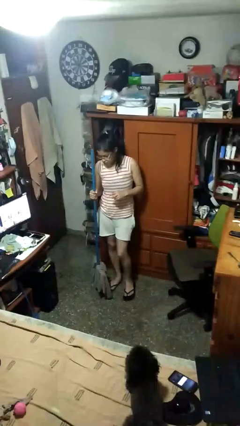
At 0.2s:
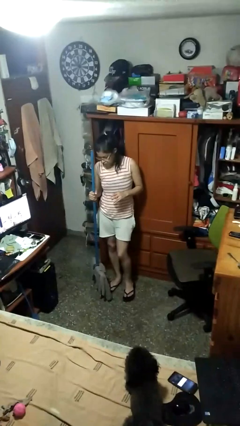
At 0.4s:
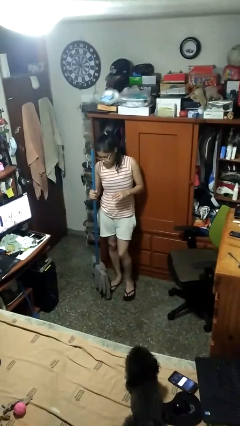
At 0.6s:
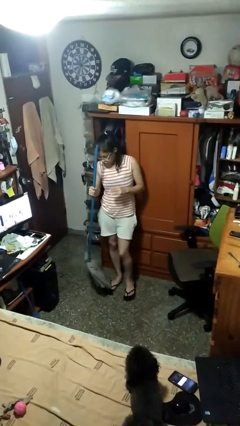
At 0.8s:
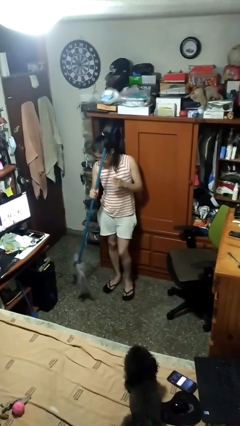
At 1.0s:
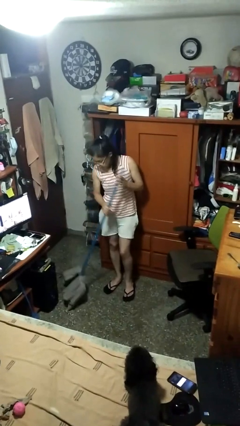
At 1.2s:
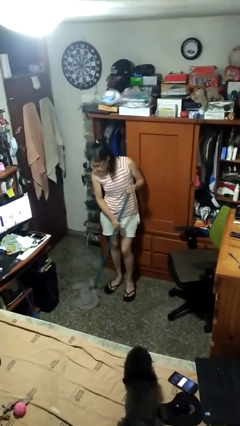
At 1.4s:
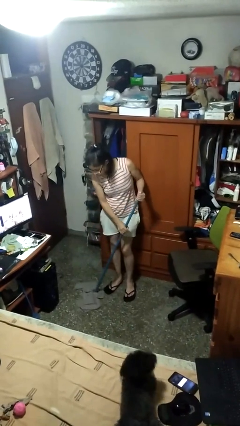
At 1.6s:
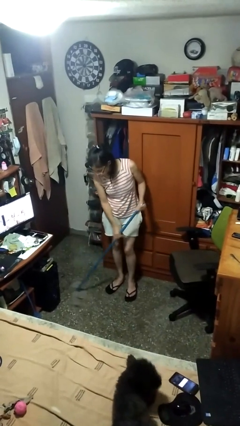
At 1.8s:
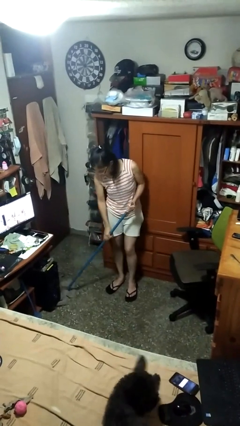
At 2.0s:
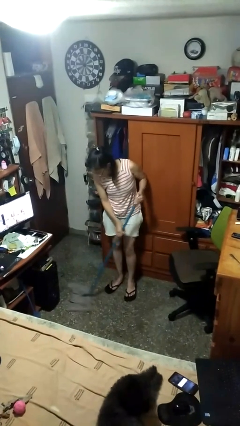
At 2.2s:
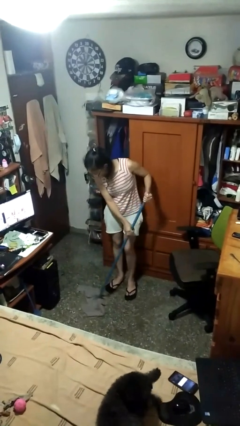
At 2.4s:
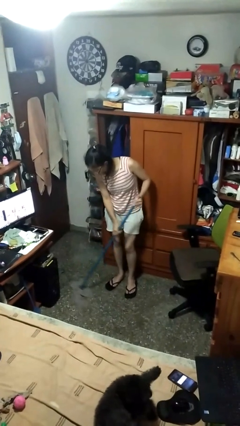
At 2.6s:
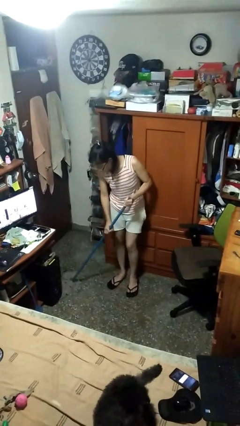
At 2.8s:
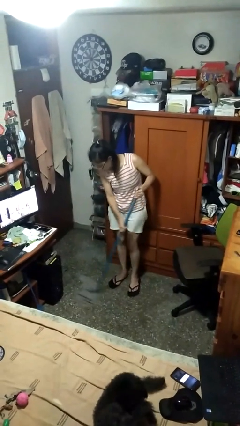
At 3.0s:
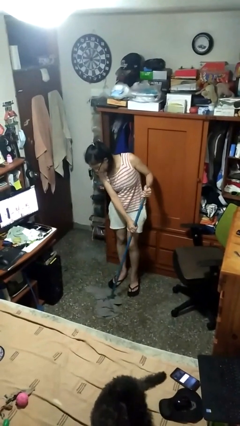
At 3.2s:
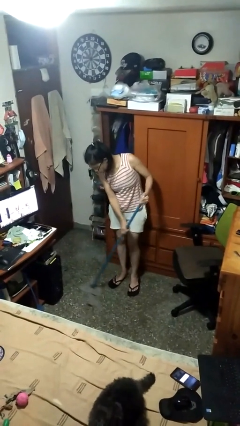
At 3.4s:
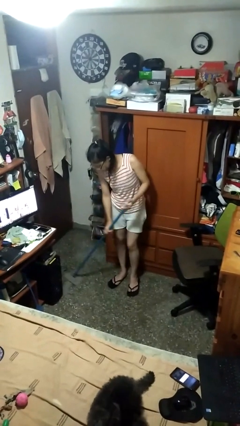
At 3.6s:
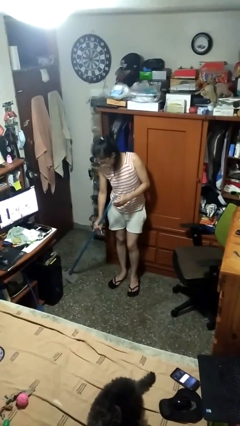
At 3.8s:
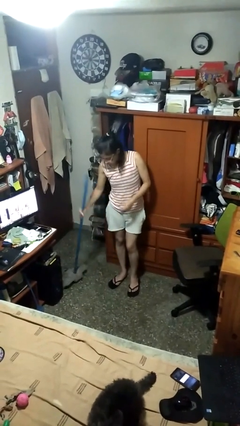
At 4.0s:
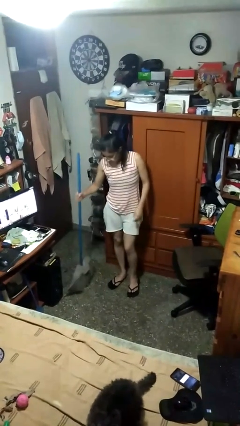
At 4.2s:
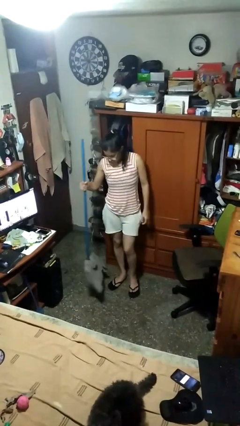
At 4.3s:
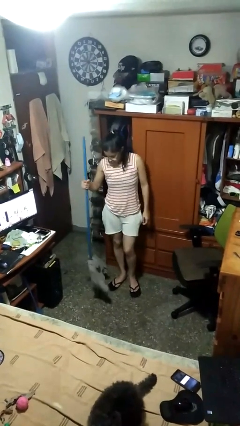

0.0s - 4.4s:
person mops

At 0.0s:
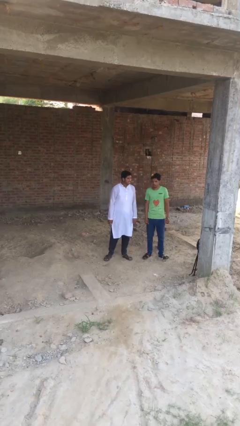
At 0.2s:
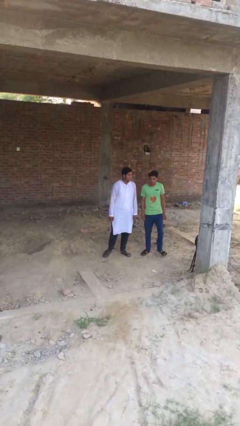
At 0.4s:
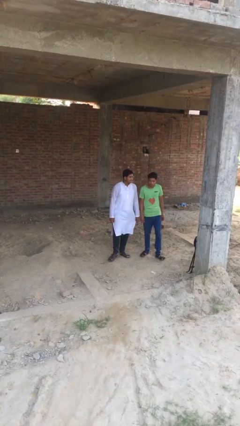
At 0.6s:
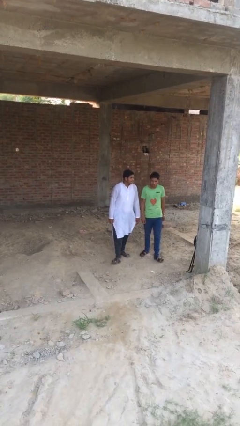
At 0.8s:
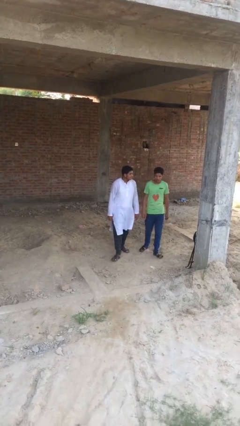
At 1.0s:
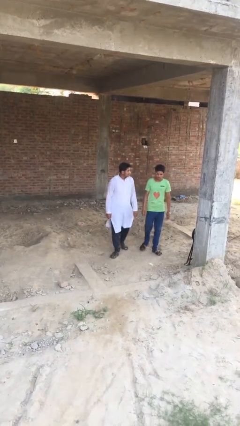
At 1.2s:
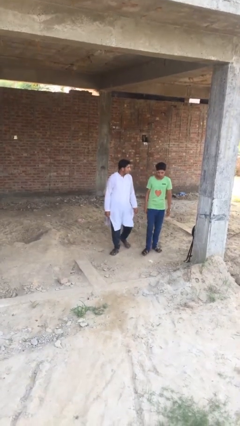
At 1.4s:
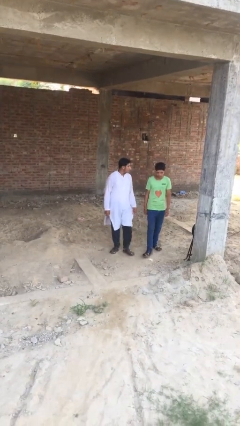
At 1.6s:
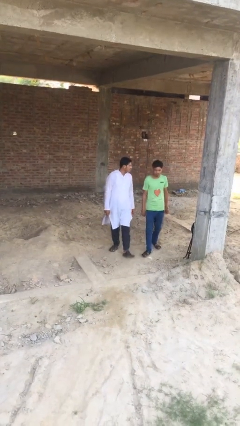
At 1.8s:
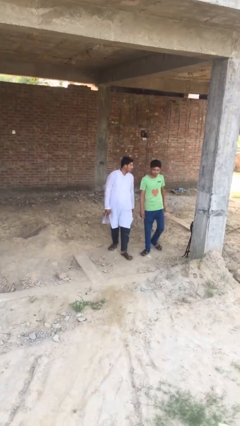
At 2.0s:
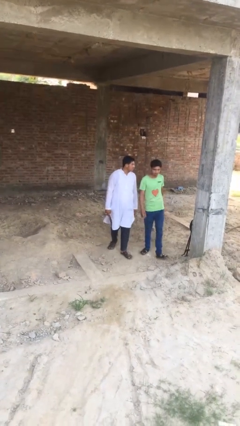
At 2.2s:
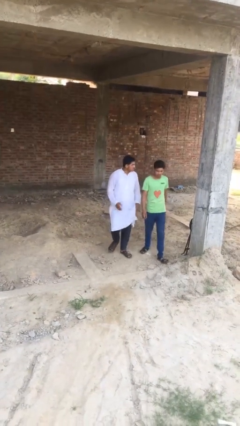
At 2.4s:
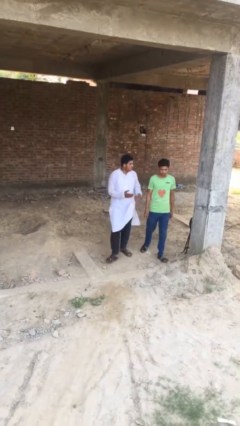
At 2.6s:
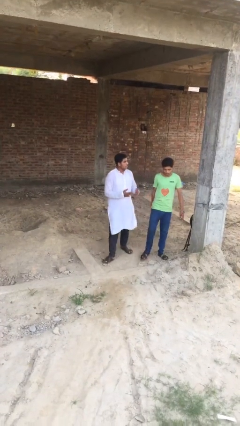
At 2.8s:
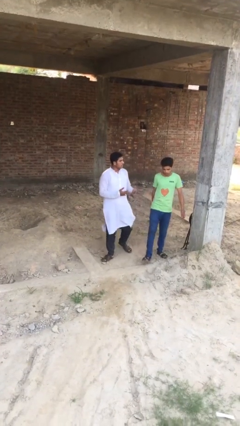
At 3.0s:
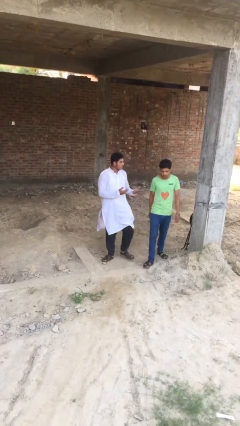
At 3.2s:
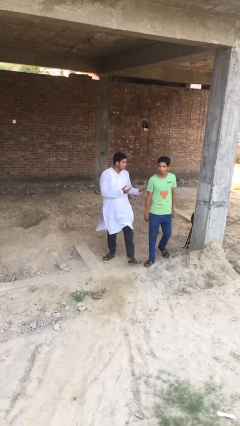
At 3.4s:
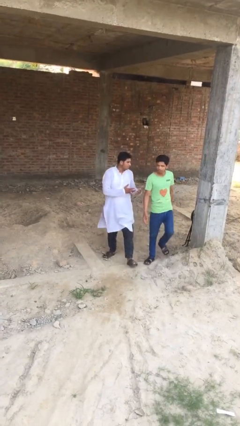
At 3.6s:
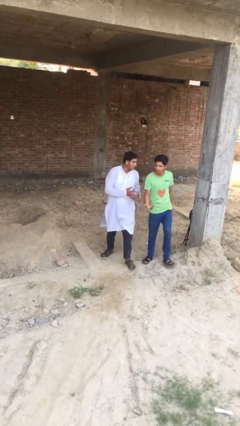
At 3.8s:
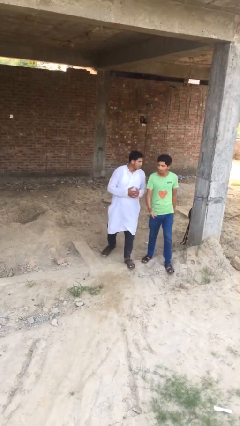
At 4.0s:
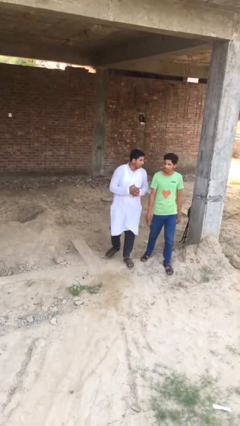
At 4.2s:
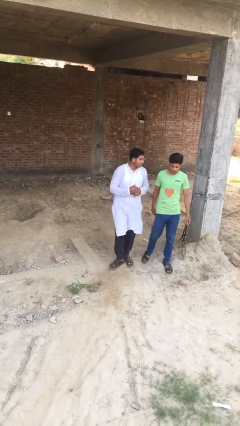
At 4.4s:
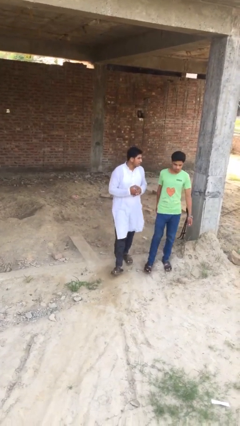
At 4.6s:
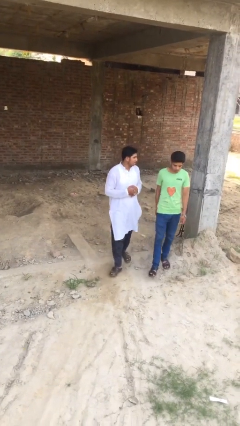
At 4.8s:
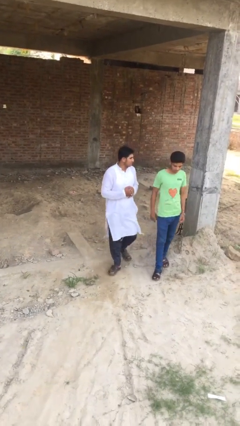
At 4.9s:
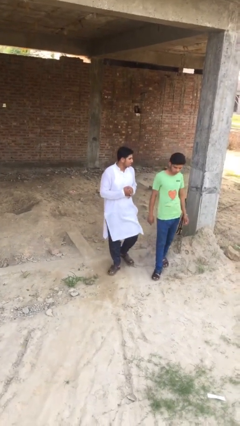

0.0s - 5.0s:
person talks to person

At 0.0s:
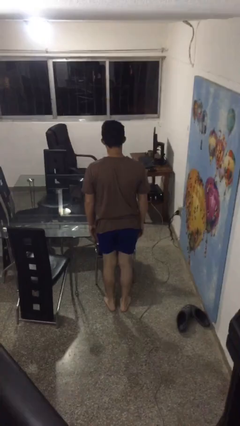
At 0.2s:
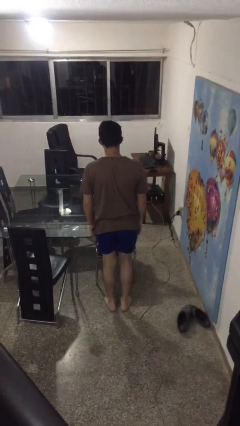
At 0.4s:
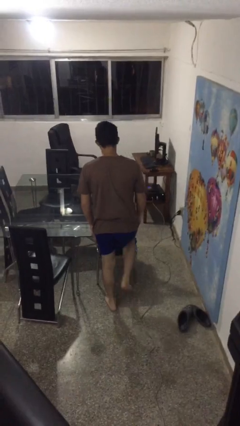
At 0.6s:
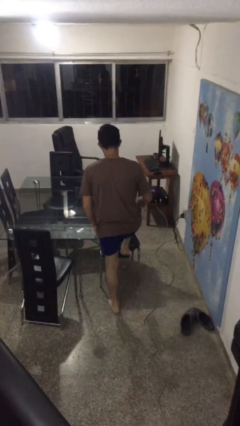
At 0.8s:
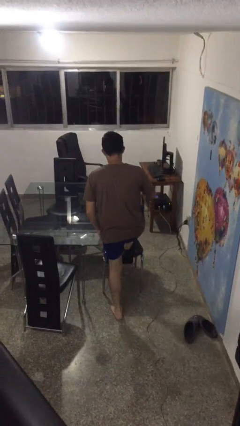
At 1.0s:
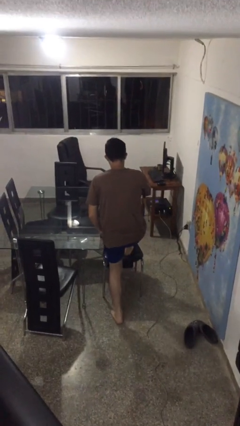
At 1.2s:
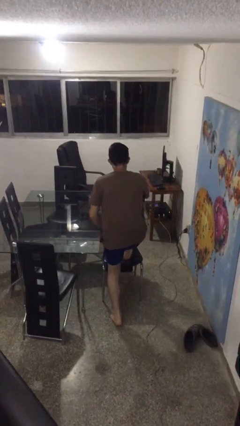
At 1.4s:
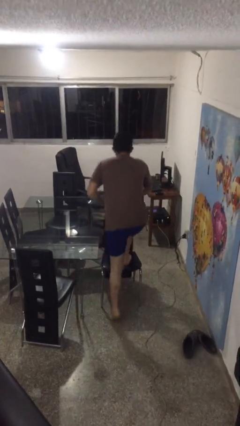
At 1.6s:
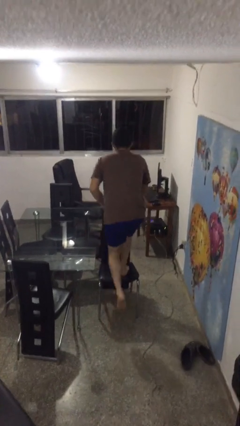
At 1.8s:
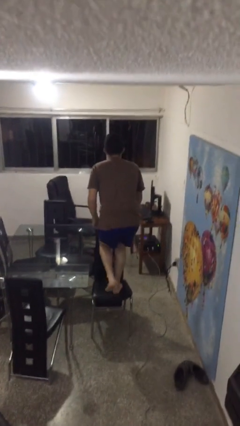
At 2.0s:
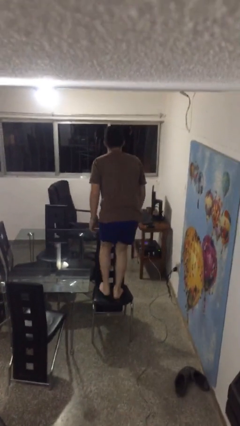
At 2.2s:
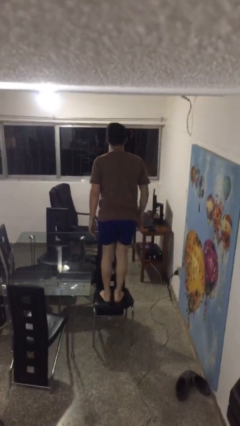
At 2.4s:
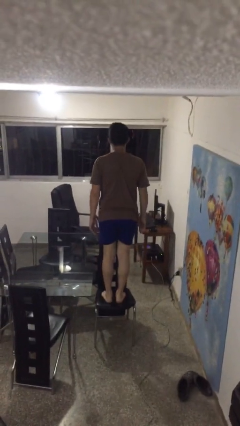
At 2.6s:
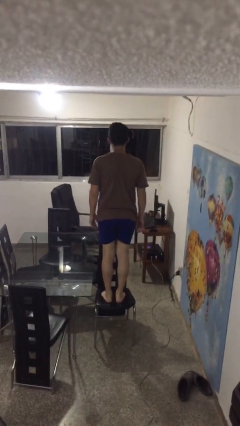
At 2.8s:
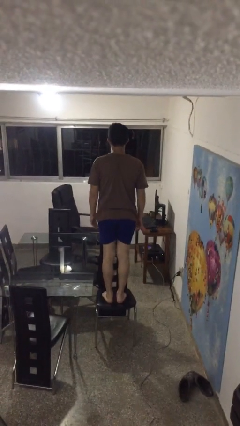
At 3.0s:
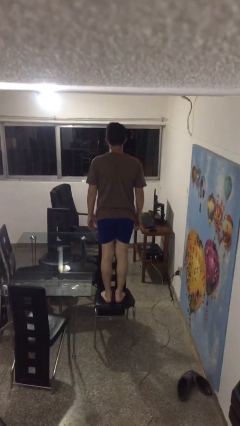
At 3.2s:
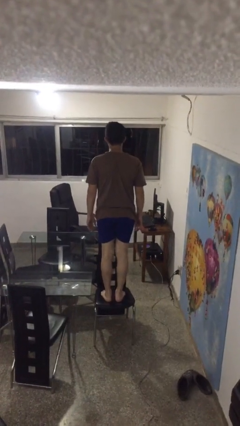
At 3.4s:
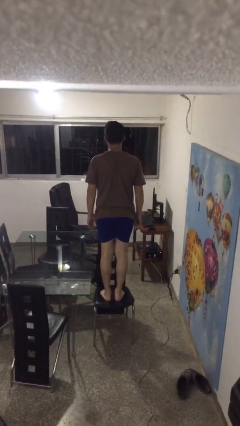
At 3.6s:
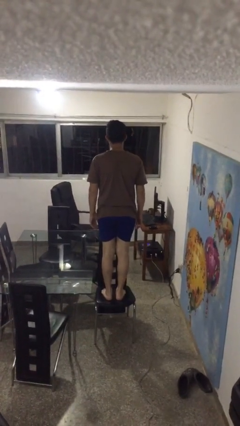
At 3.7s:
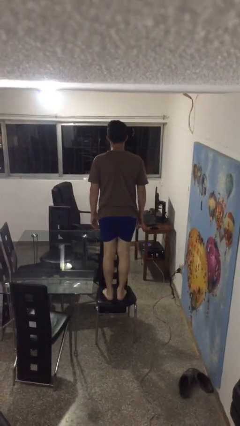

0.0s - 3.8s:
person climbs on chair

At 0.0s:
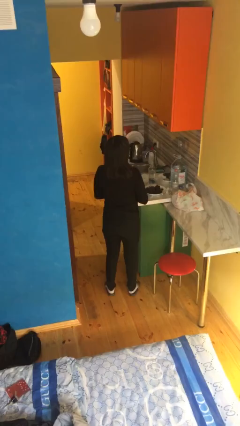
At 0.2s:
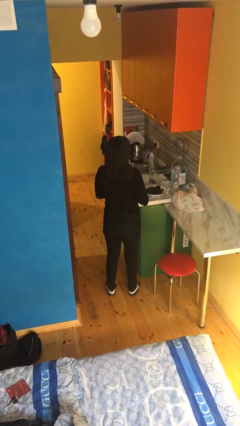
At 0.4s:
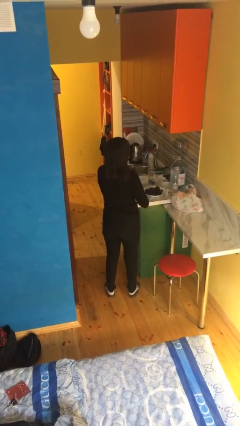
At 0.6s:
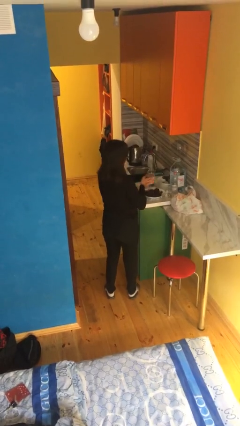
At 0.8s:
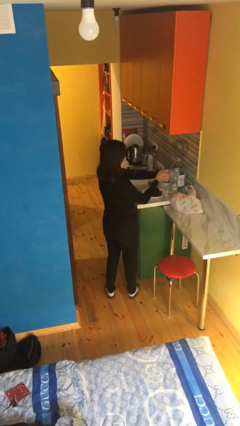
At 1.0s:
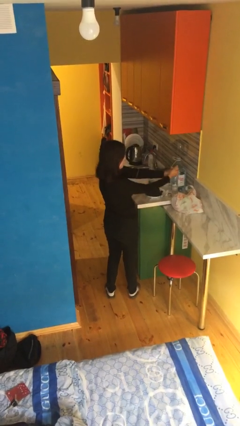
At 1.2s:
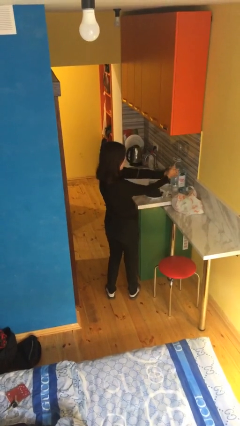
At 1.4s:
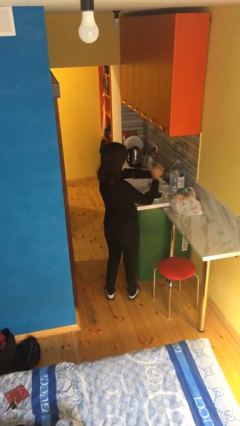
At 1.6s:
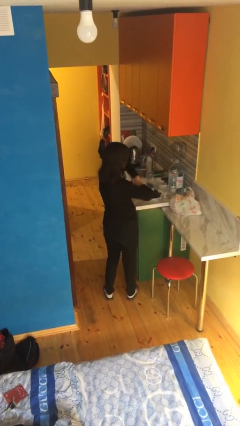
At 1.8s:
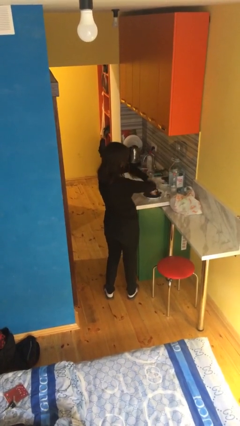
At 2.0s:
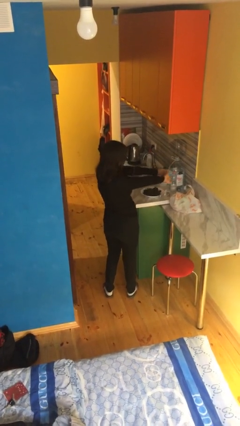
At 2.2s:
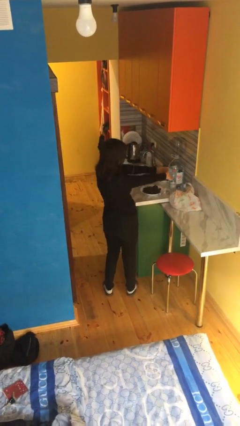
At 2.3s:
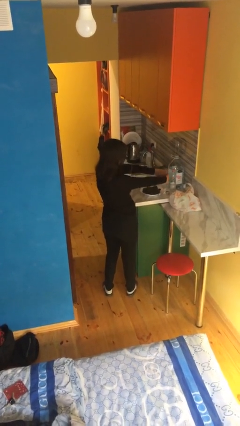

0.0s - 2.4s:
person cracks knuckles

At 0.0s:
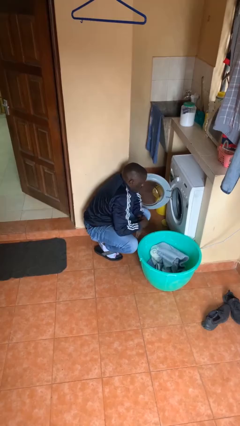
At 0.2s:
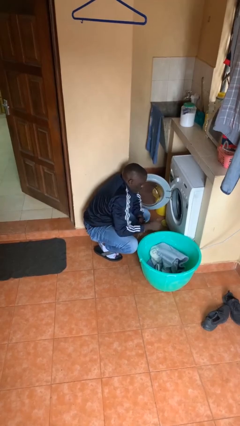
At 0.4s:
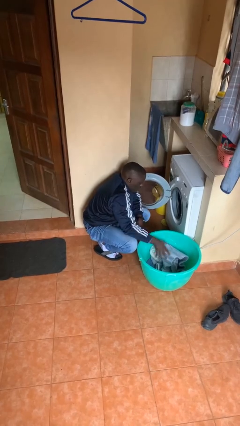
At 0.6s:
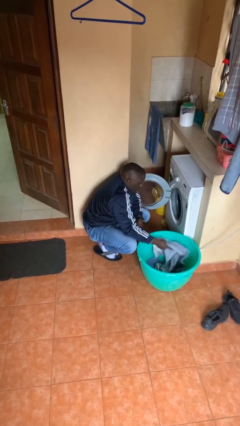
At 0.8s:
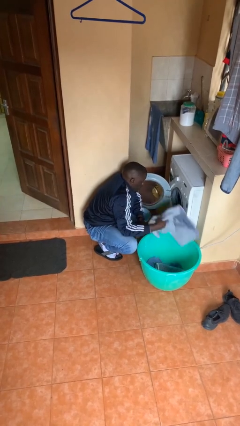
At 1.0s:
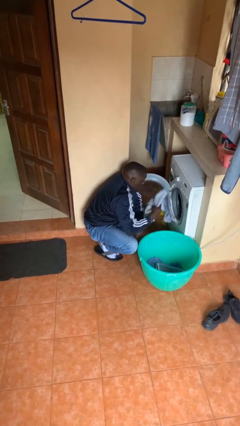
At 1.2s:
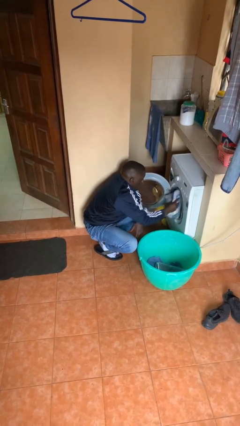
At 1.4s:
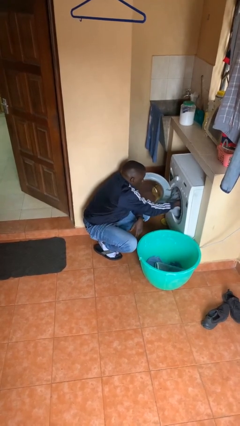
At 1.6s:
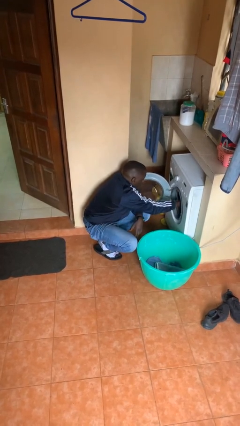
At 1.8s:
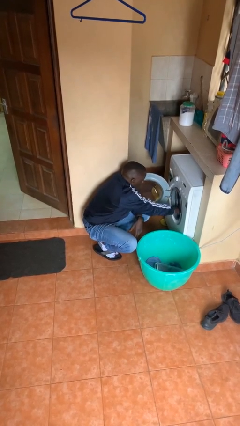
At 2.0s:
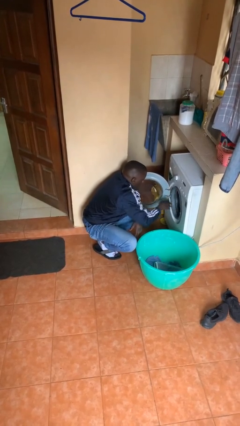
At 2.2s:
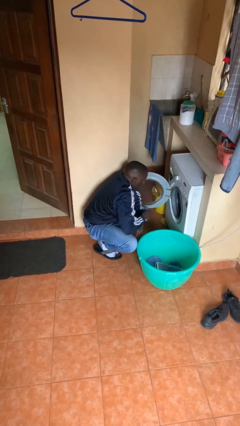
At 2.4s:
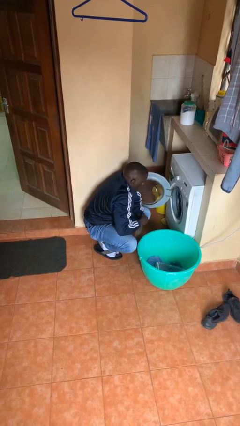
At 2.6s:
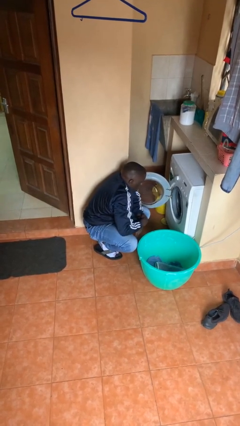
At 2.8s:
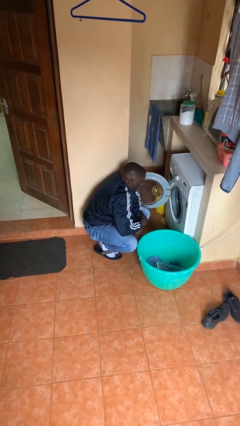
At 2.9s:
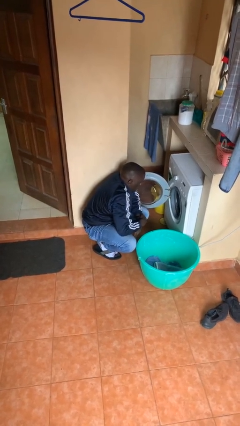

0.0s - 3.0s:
person loads clotheswasher
